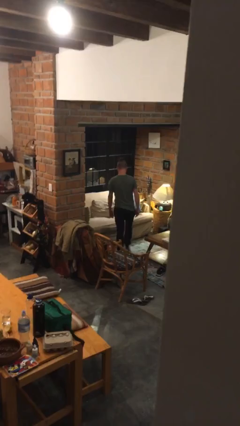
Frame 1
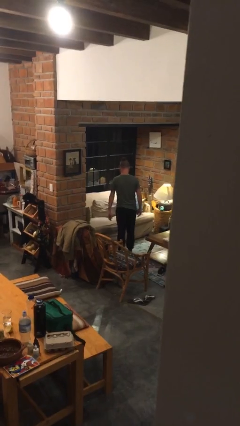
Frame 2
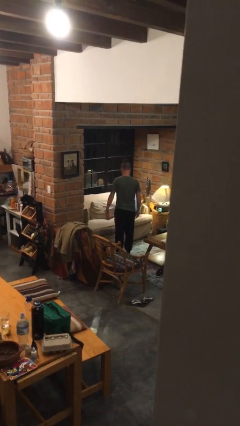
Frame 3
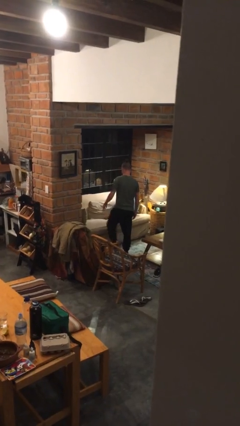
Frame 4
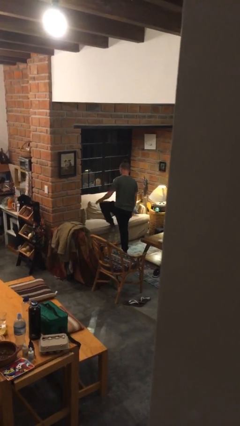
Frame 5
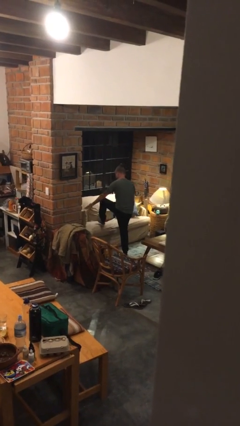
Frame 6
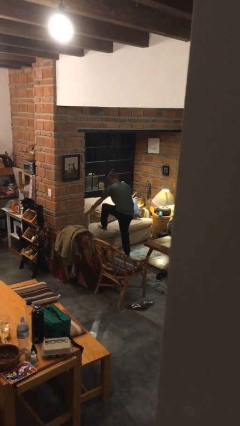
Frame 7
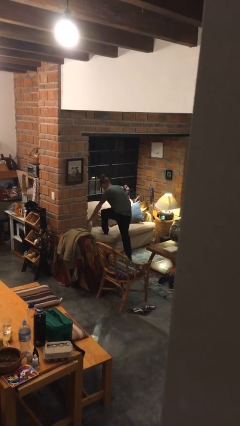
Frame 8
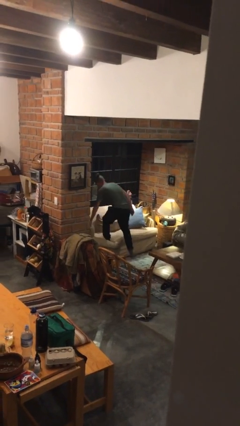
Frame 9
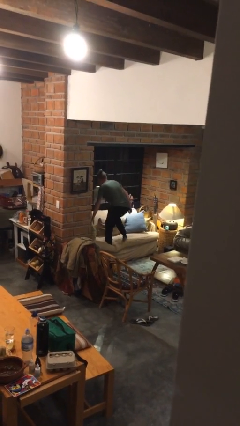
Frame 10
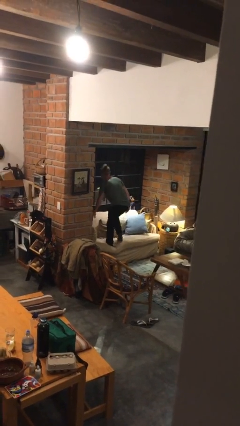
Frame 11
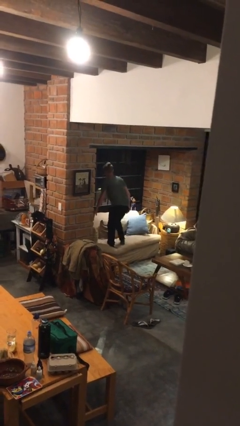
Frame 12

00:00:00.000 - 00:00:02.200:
person climbs on couch

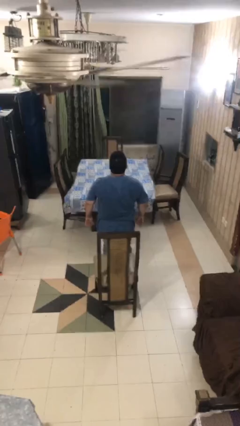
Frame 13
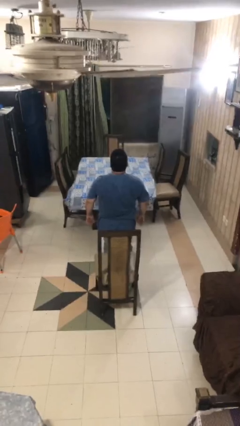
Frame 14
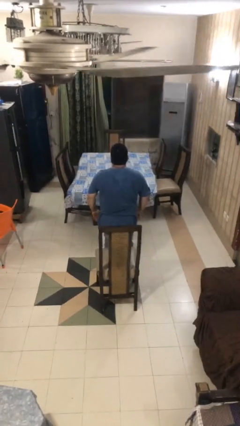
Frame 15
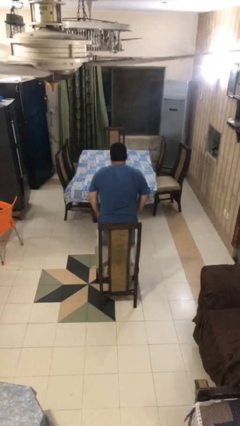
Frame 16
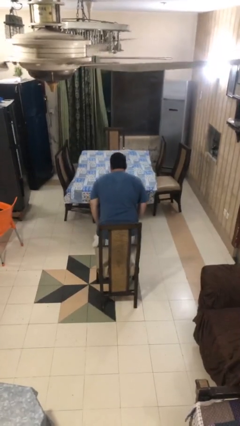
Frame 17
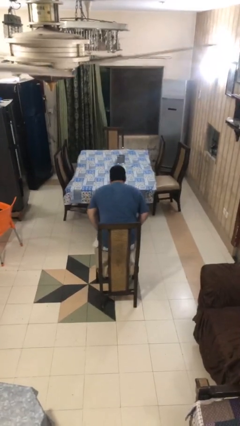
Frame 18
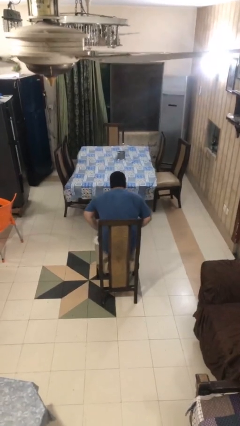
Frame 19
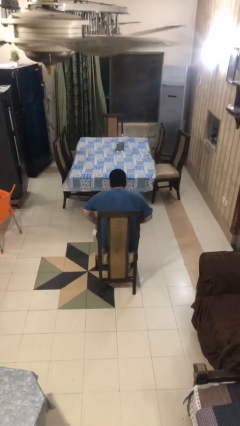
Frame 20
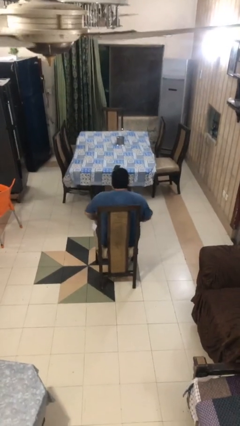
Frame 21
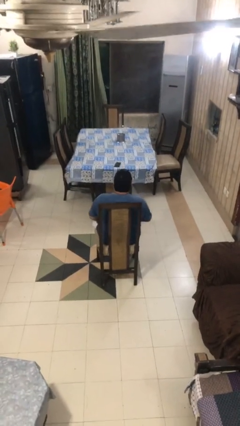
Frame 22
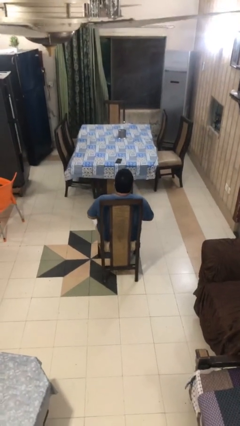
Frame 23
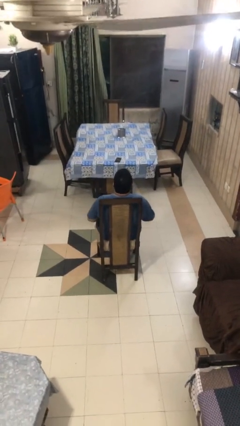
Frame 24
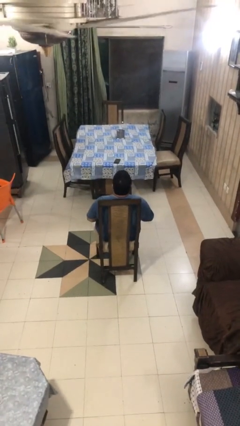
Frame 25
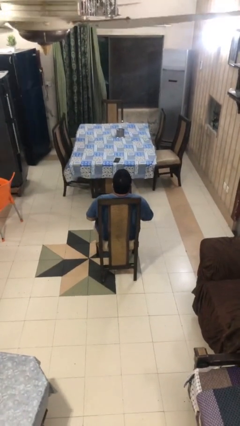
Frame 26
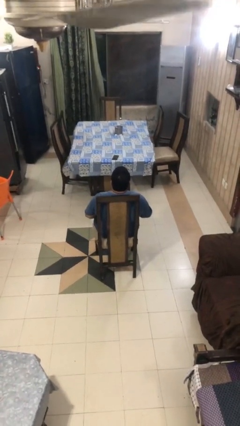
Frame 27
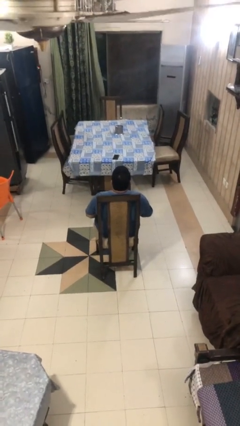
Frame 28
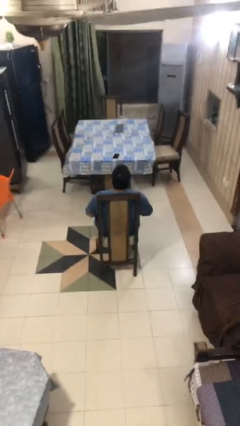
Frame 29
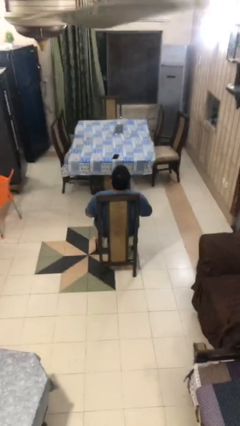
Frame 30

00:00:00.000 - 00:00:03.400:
person sits down

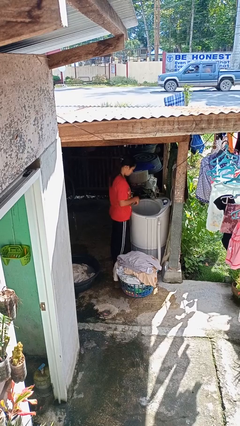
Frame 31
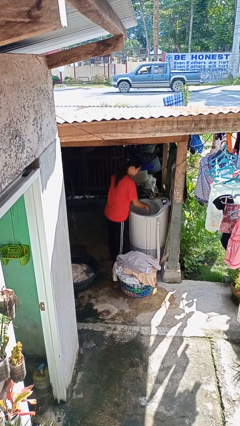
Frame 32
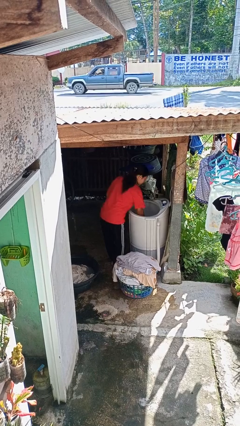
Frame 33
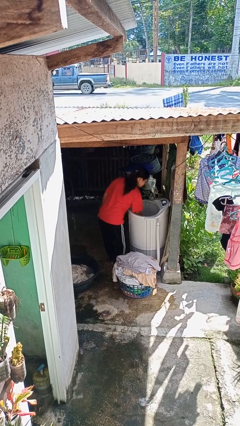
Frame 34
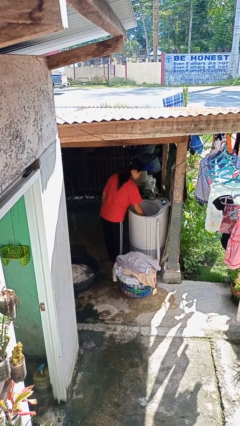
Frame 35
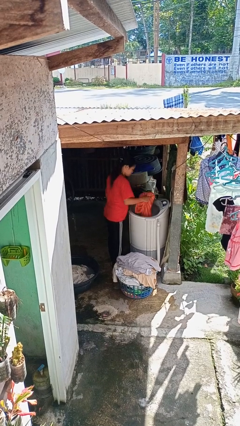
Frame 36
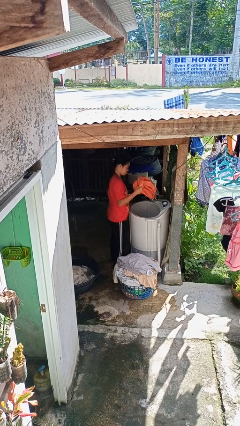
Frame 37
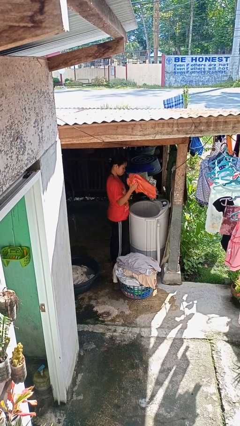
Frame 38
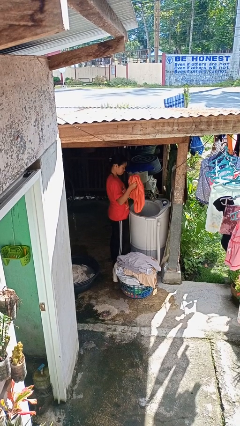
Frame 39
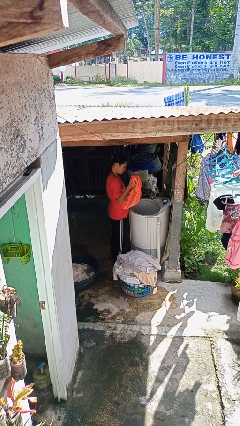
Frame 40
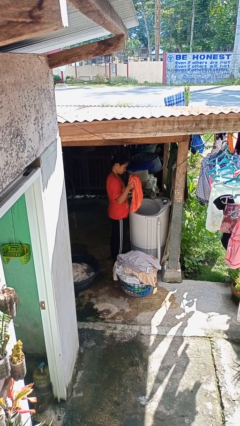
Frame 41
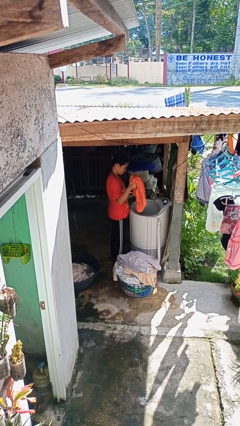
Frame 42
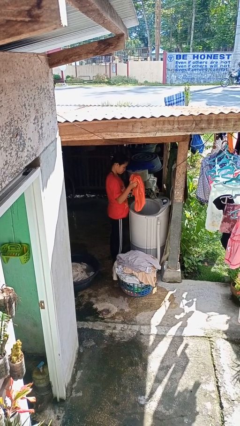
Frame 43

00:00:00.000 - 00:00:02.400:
person unloads clotheswasher

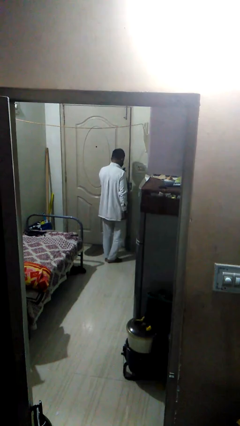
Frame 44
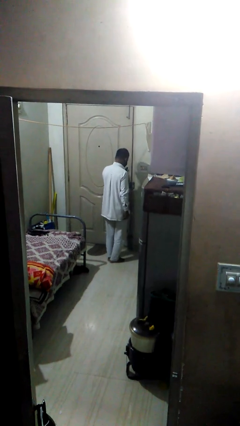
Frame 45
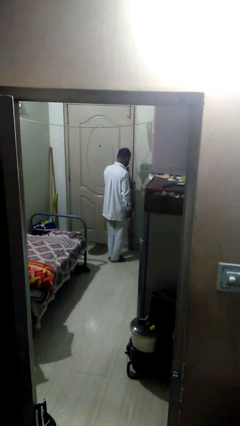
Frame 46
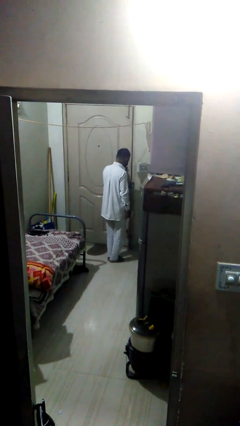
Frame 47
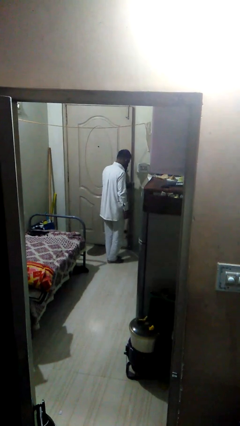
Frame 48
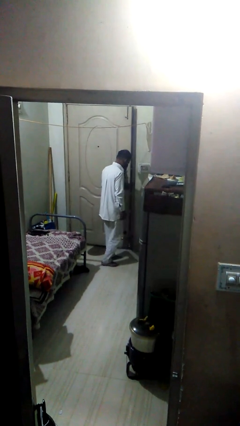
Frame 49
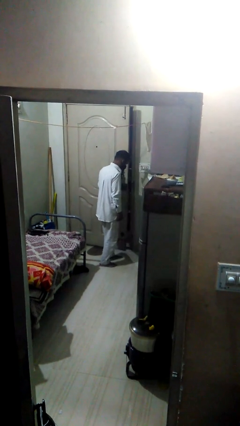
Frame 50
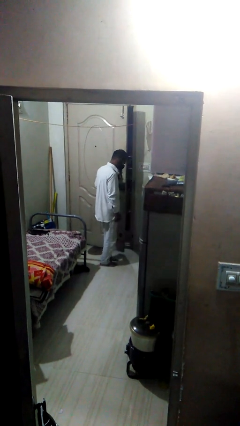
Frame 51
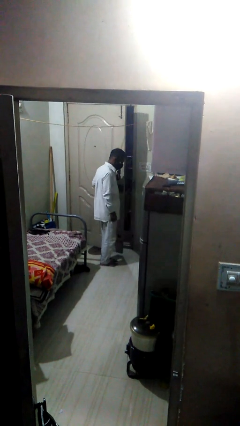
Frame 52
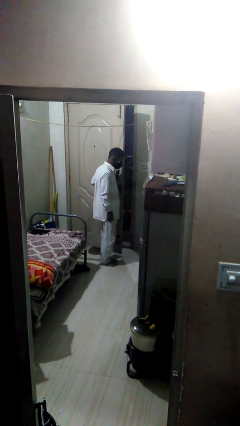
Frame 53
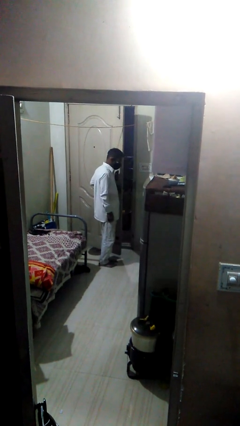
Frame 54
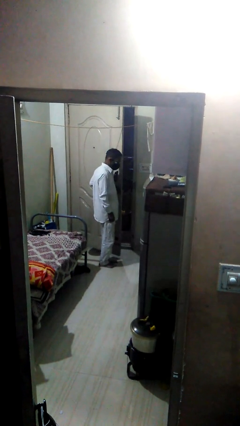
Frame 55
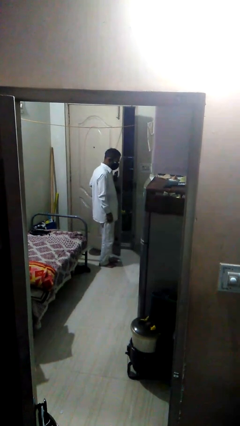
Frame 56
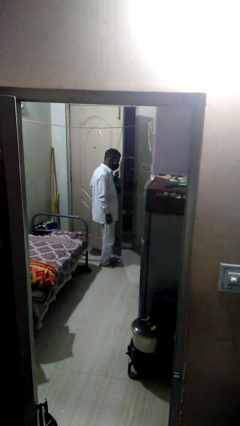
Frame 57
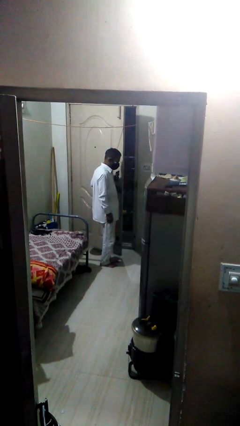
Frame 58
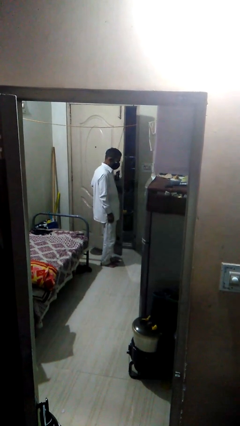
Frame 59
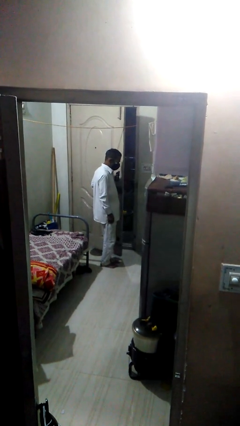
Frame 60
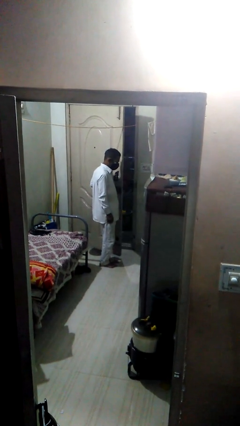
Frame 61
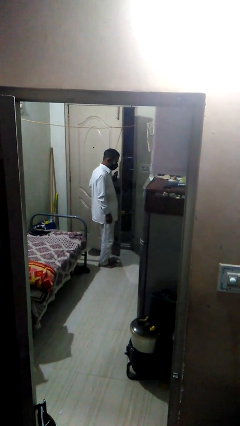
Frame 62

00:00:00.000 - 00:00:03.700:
person opens facility door

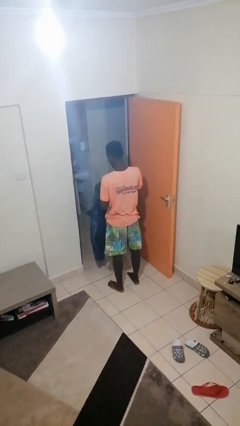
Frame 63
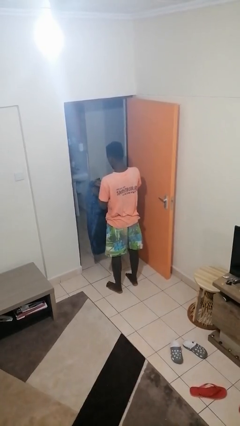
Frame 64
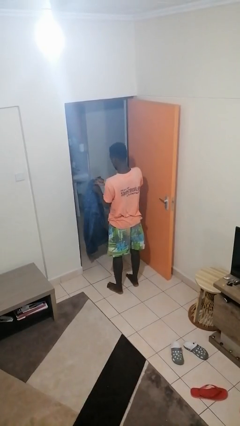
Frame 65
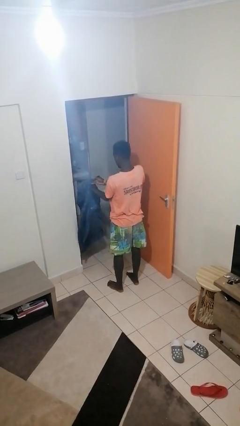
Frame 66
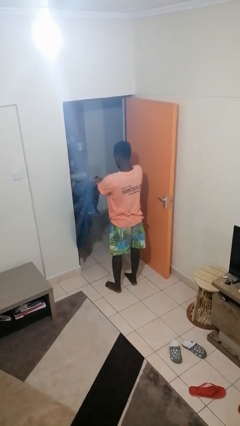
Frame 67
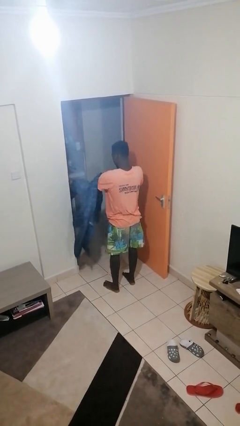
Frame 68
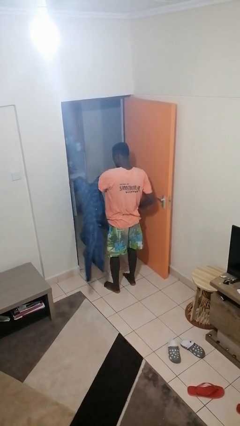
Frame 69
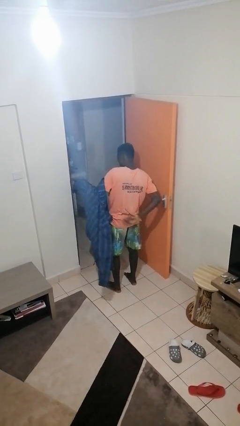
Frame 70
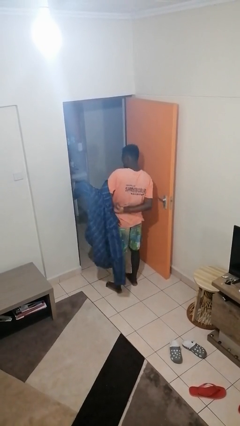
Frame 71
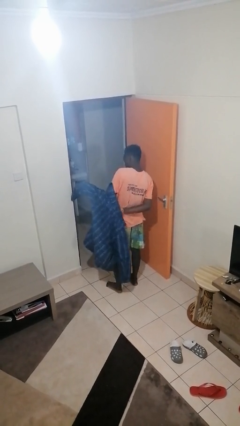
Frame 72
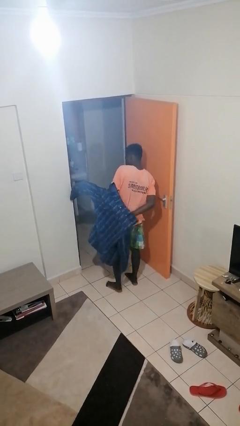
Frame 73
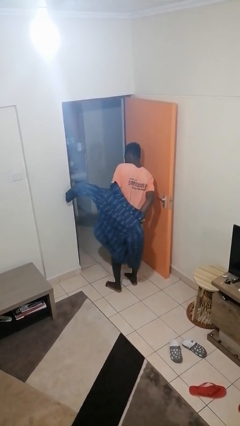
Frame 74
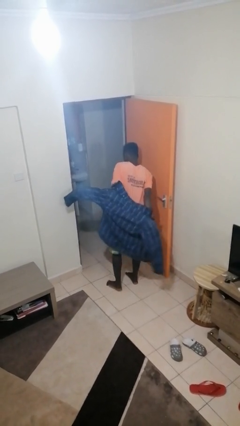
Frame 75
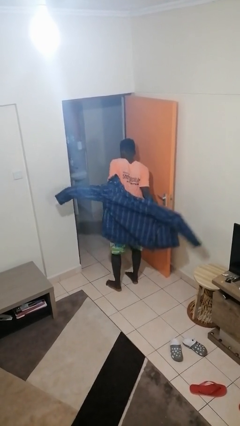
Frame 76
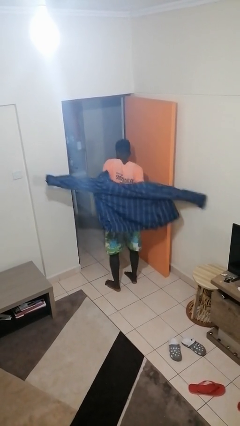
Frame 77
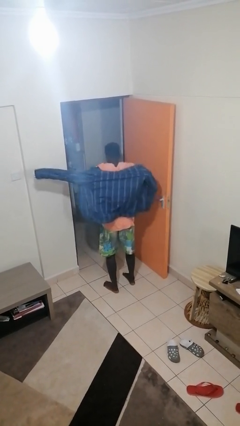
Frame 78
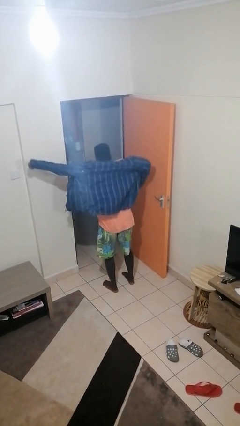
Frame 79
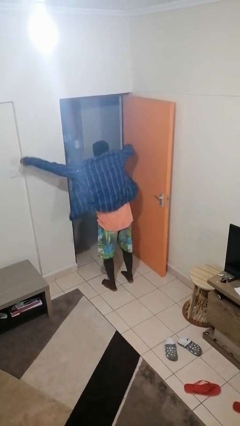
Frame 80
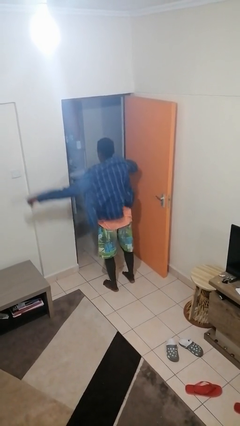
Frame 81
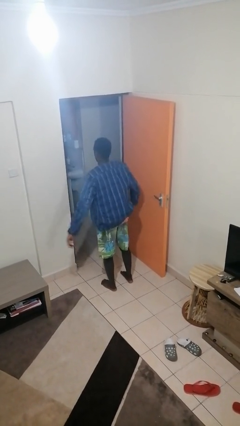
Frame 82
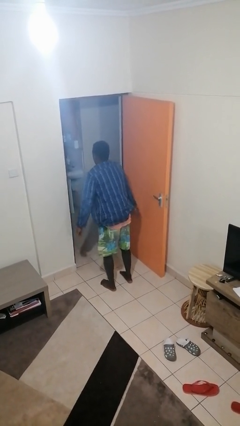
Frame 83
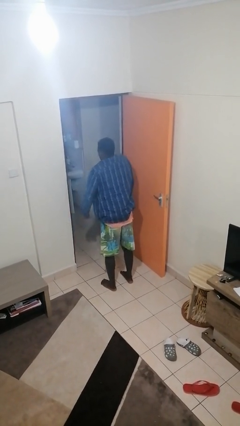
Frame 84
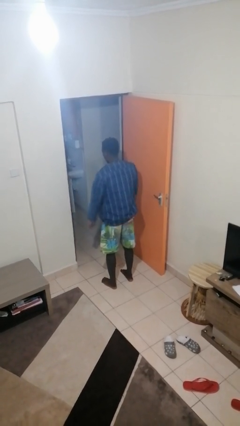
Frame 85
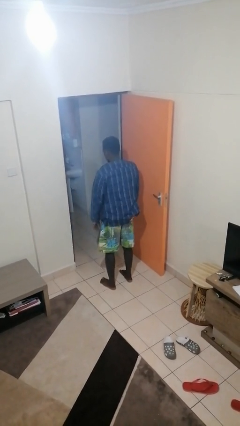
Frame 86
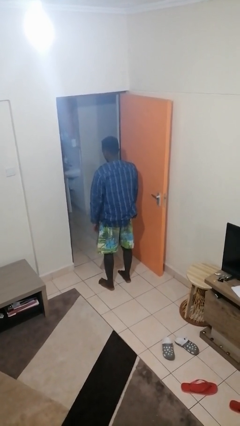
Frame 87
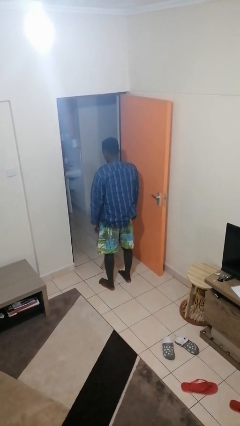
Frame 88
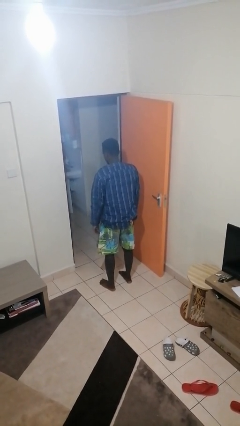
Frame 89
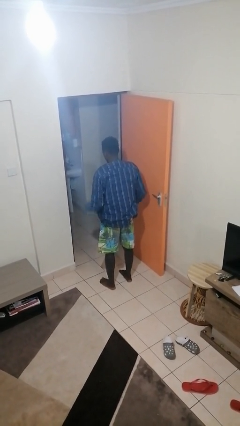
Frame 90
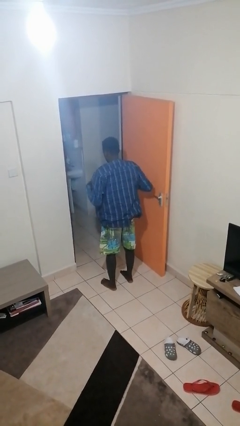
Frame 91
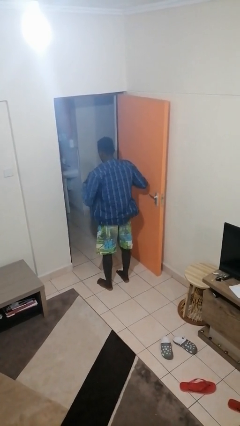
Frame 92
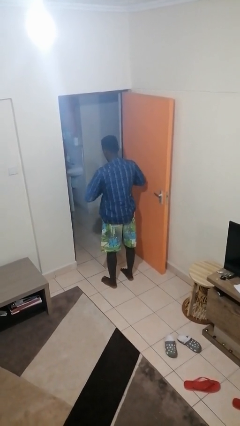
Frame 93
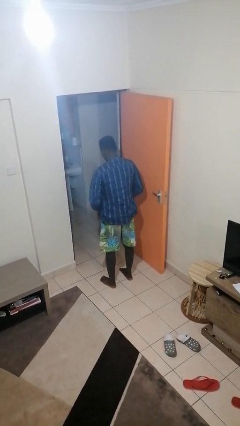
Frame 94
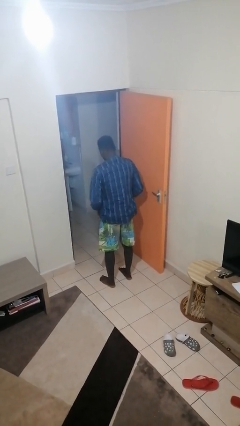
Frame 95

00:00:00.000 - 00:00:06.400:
person puts on jacket
